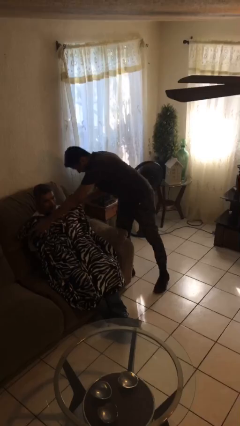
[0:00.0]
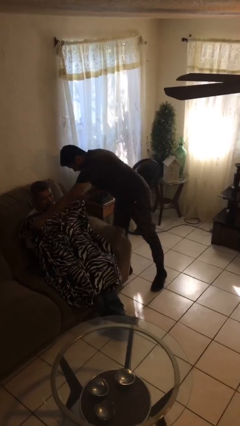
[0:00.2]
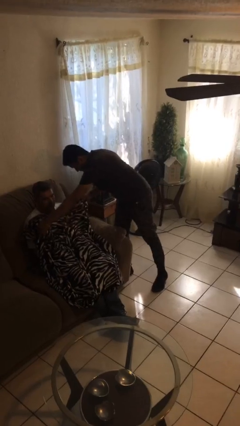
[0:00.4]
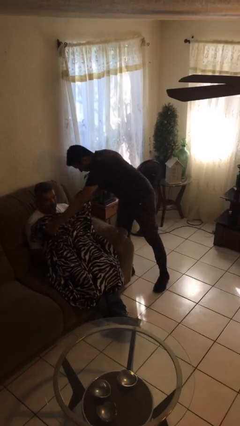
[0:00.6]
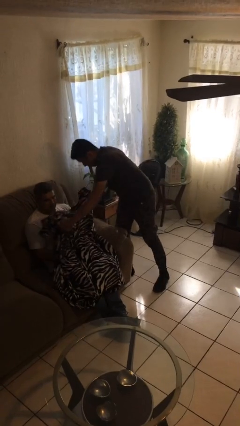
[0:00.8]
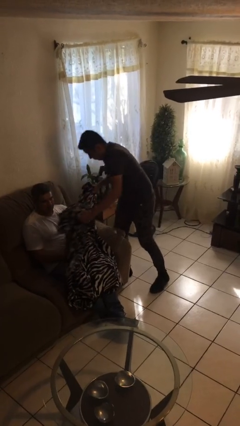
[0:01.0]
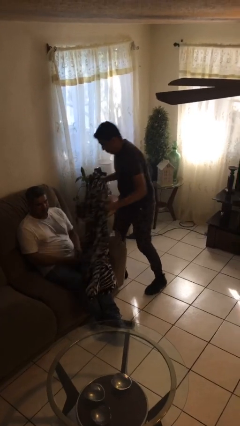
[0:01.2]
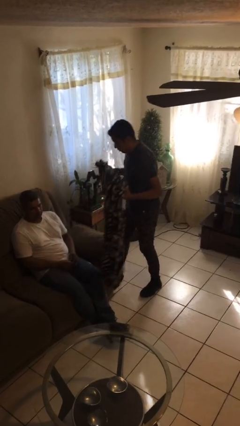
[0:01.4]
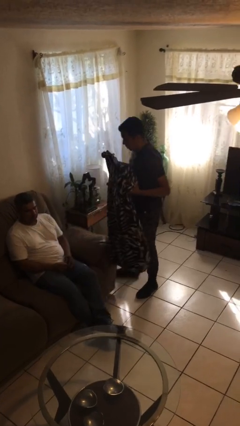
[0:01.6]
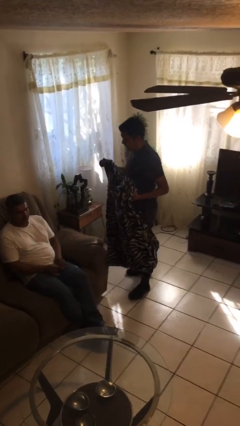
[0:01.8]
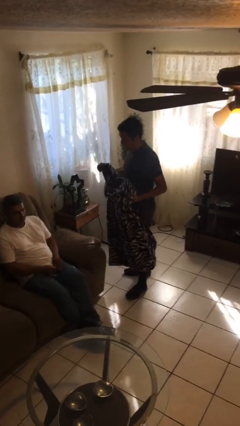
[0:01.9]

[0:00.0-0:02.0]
person uncovers friend with blanket

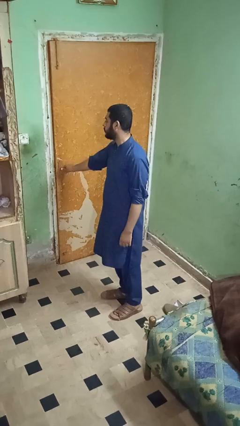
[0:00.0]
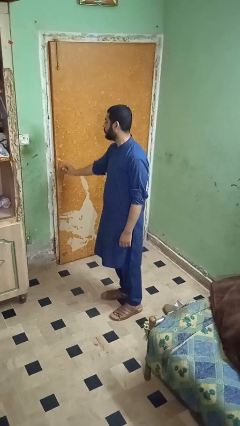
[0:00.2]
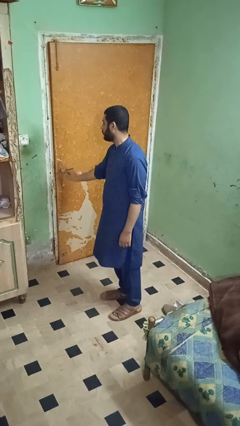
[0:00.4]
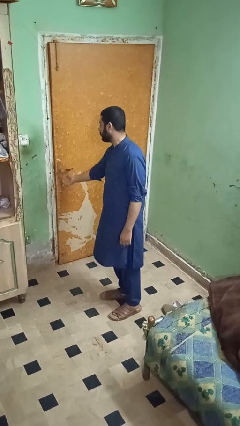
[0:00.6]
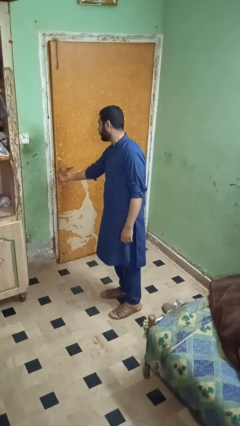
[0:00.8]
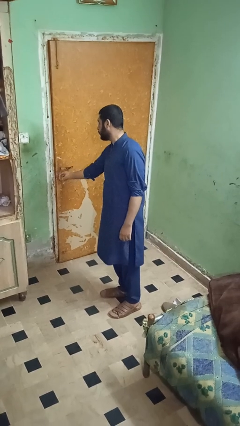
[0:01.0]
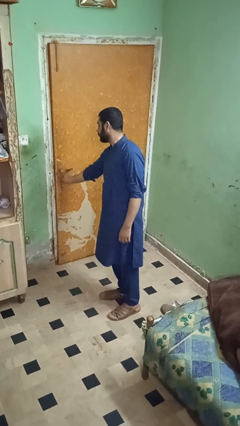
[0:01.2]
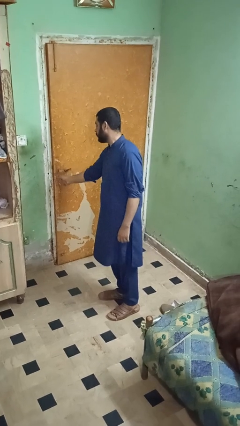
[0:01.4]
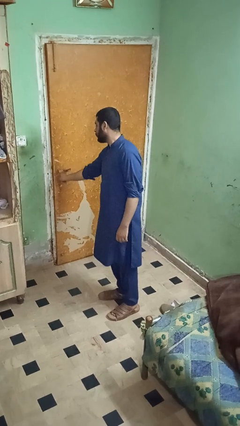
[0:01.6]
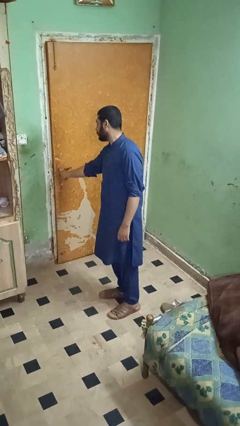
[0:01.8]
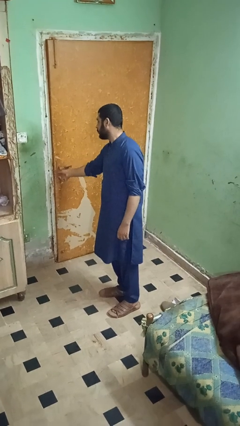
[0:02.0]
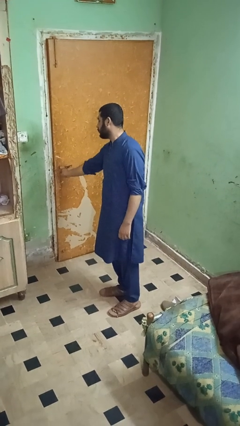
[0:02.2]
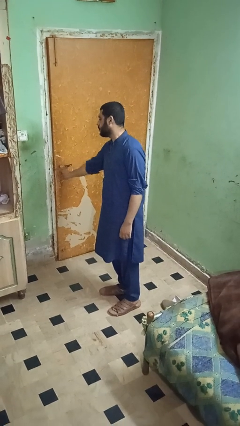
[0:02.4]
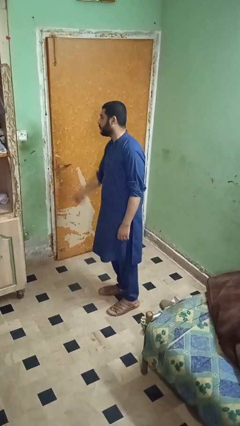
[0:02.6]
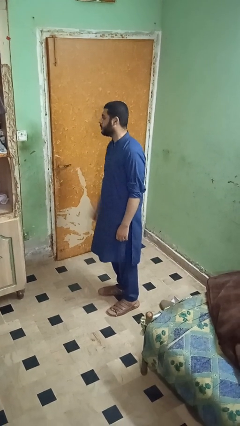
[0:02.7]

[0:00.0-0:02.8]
person locks door with keys

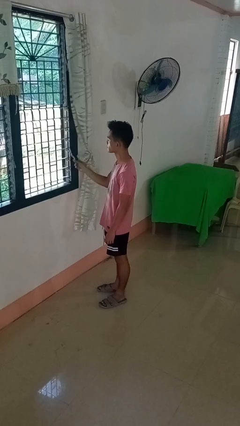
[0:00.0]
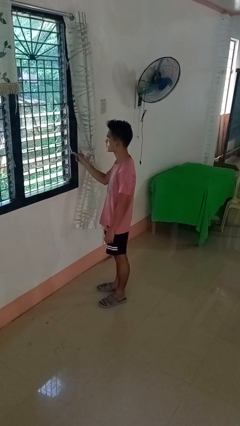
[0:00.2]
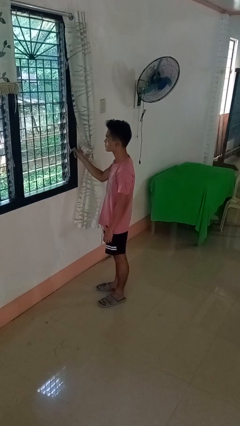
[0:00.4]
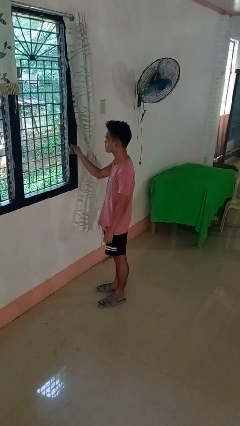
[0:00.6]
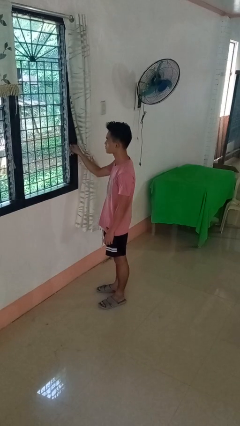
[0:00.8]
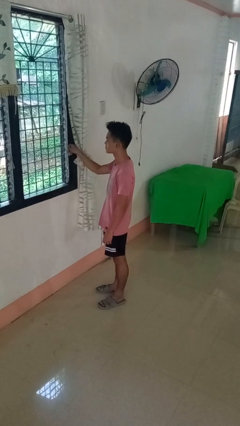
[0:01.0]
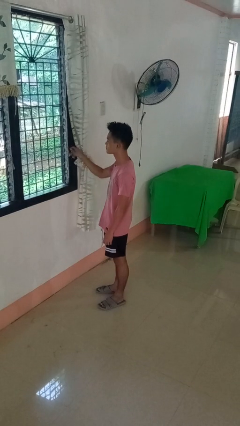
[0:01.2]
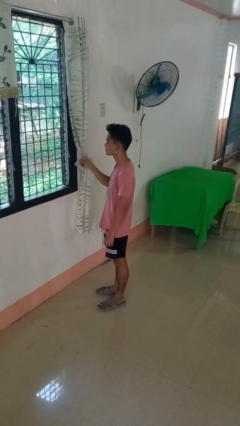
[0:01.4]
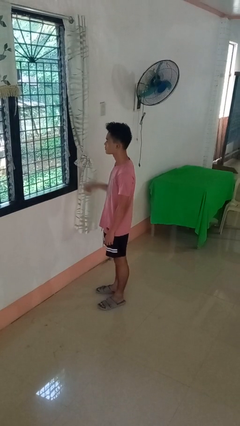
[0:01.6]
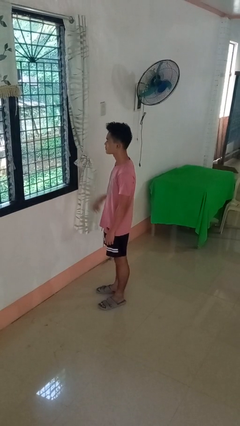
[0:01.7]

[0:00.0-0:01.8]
person closes home window

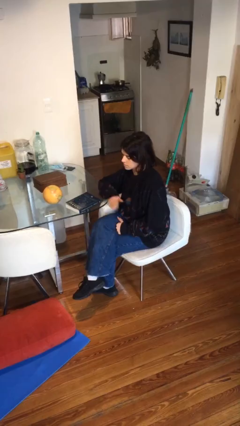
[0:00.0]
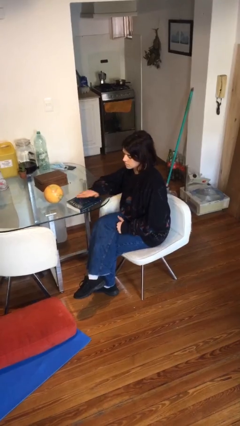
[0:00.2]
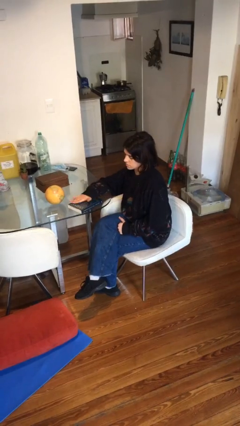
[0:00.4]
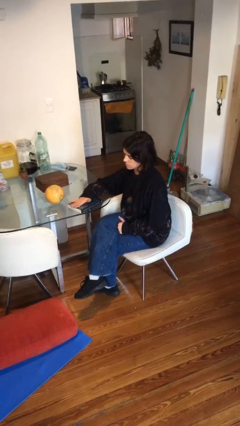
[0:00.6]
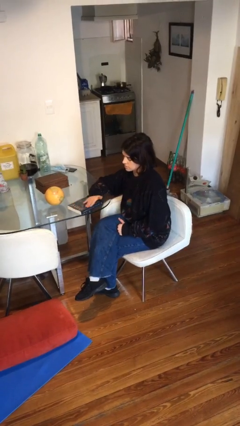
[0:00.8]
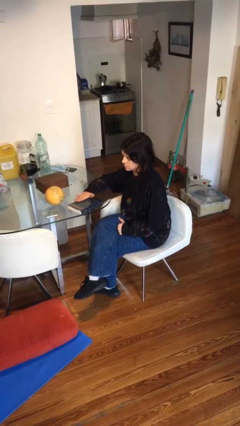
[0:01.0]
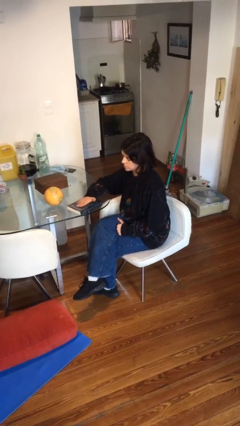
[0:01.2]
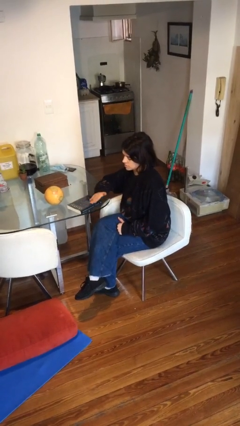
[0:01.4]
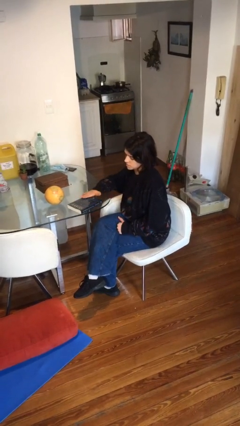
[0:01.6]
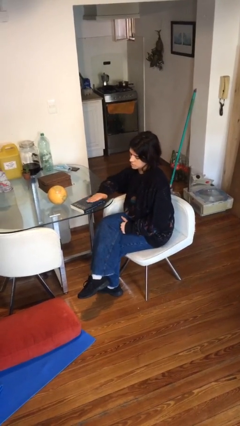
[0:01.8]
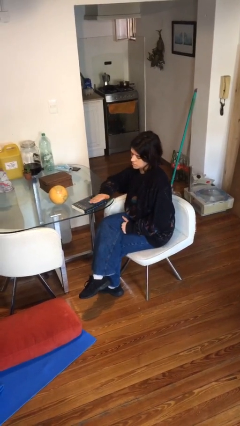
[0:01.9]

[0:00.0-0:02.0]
person waves hand over object

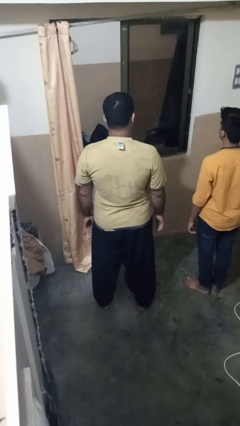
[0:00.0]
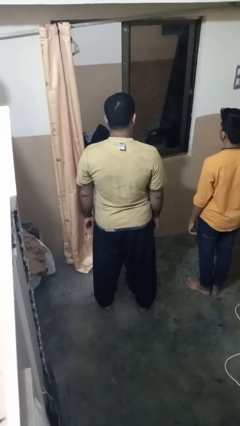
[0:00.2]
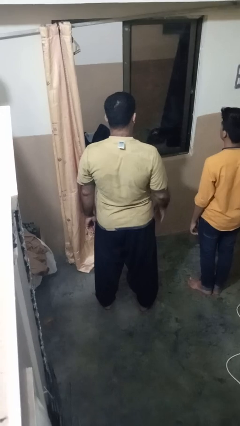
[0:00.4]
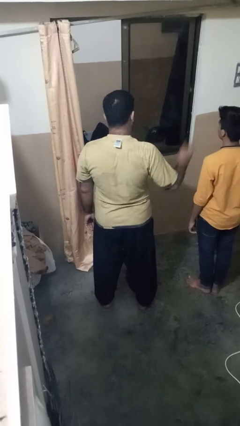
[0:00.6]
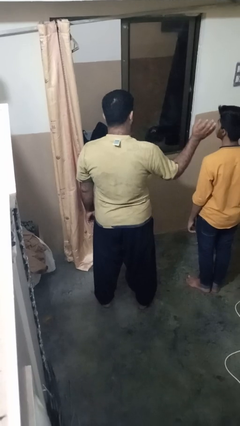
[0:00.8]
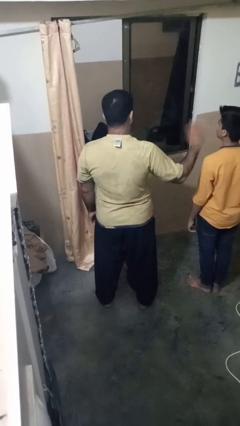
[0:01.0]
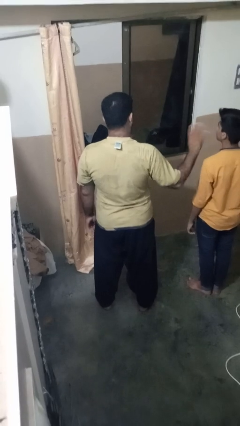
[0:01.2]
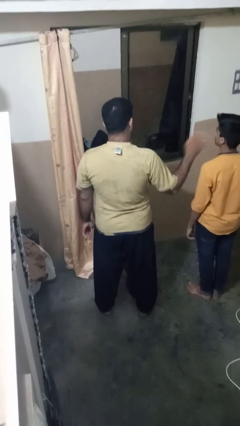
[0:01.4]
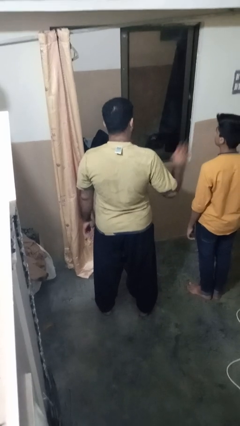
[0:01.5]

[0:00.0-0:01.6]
person waves at person

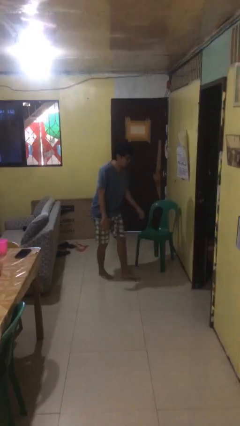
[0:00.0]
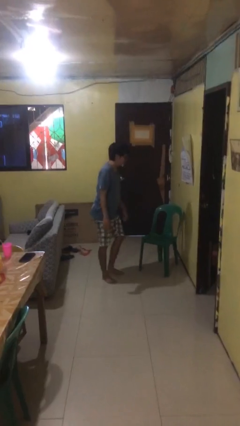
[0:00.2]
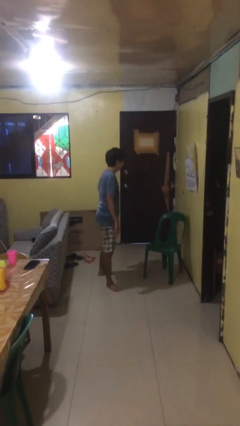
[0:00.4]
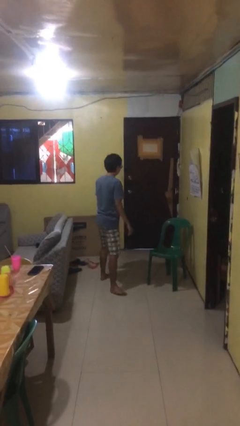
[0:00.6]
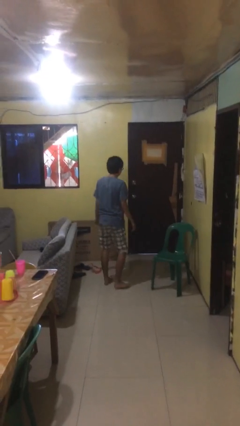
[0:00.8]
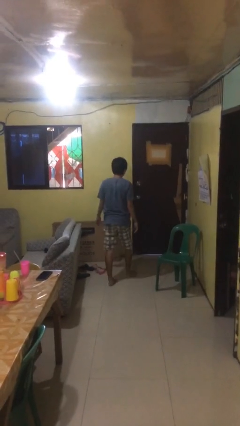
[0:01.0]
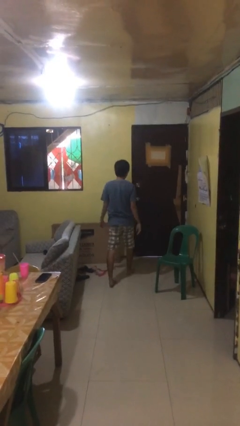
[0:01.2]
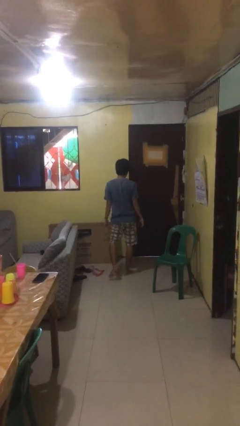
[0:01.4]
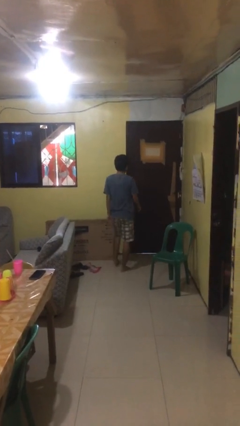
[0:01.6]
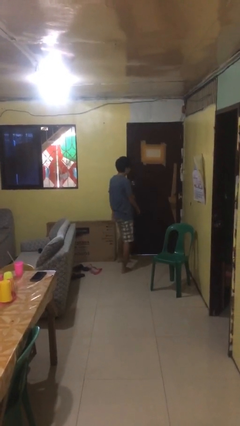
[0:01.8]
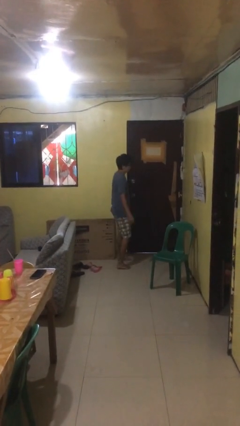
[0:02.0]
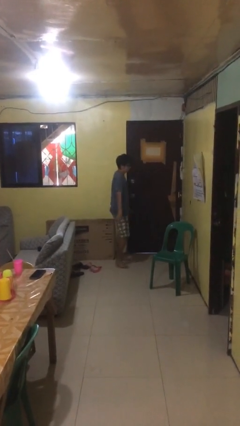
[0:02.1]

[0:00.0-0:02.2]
person stands up from floor

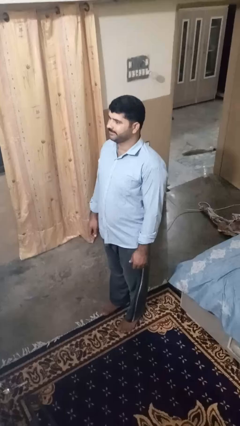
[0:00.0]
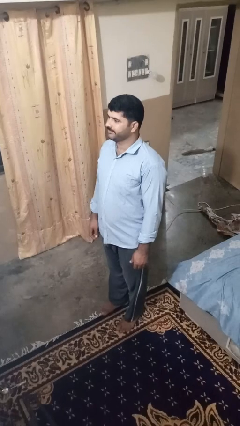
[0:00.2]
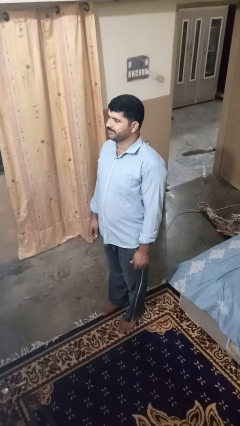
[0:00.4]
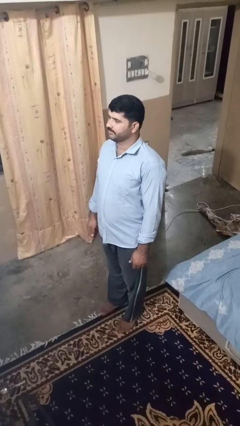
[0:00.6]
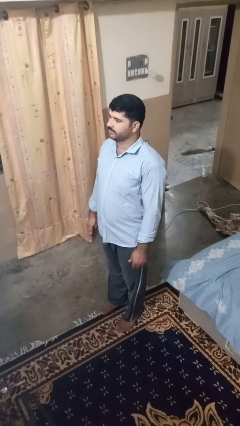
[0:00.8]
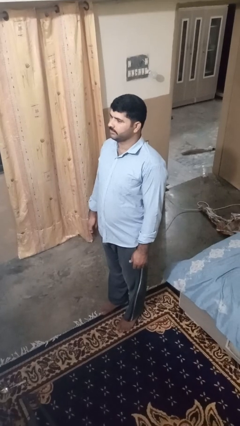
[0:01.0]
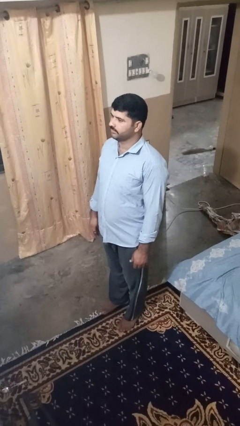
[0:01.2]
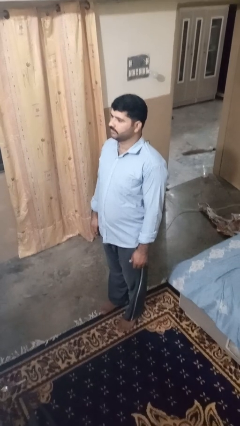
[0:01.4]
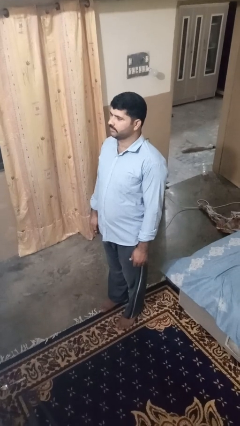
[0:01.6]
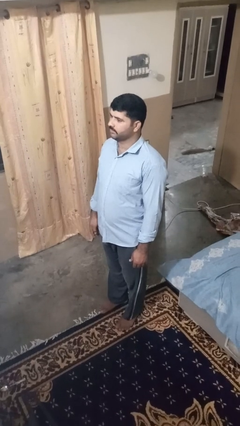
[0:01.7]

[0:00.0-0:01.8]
person salutes

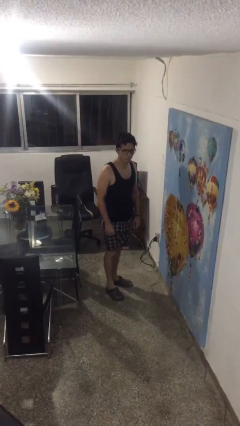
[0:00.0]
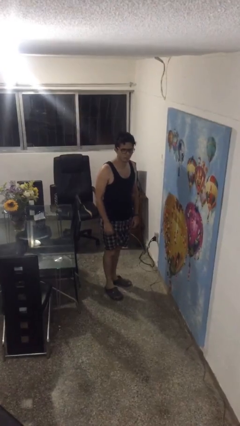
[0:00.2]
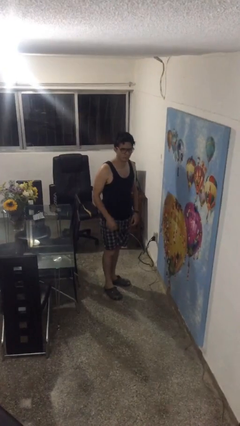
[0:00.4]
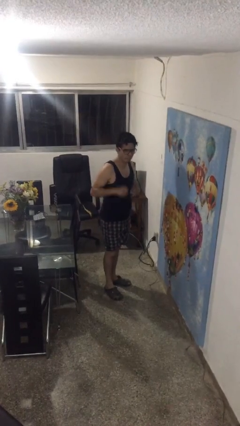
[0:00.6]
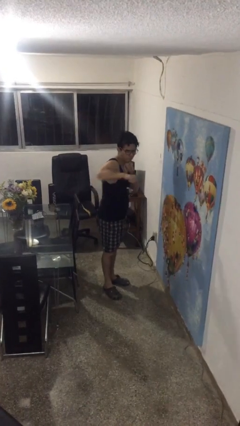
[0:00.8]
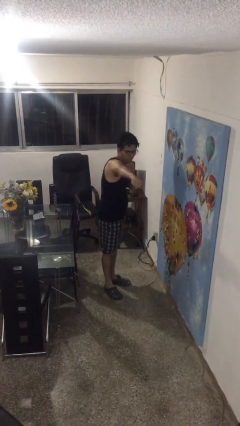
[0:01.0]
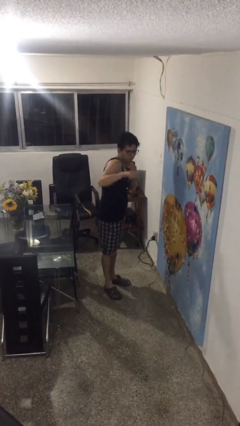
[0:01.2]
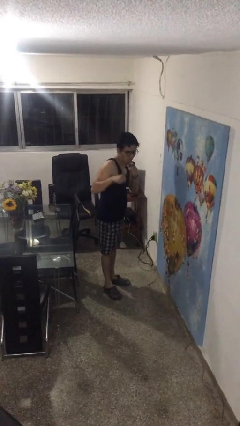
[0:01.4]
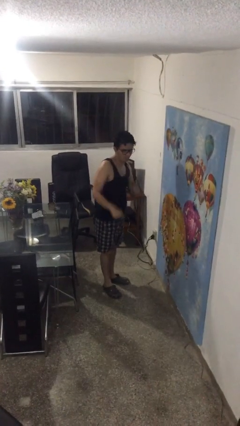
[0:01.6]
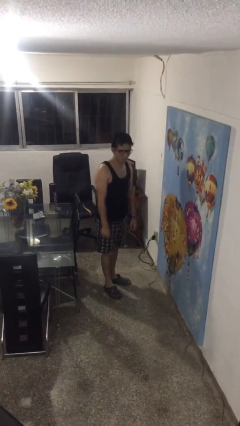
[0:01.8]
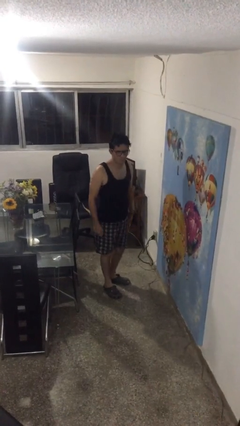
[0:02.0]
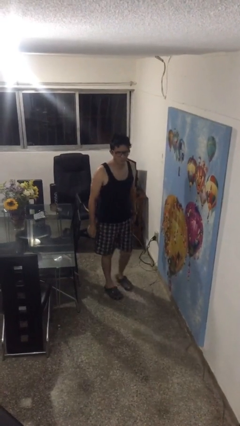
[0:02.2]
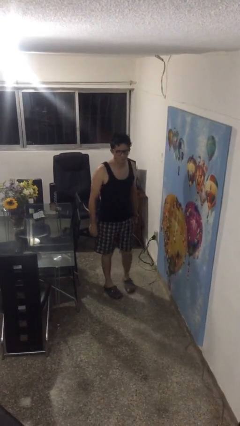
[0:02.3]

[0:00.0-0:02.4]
person karate chop
